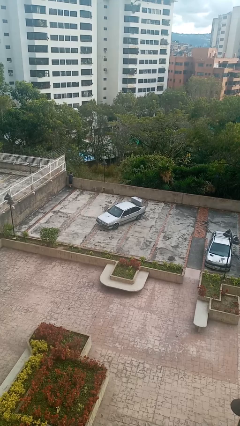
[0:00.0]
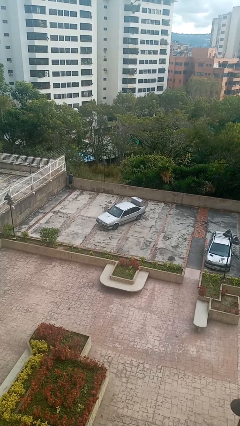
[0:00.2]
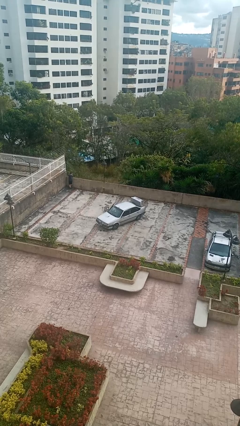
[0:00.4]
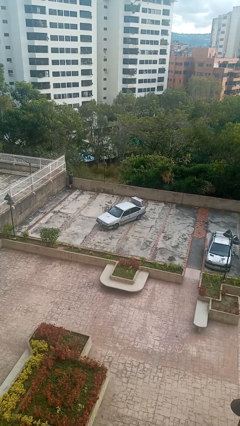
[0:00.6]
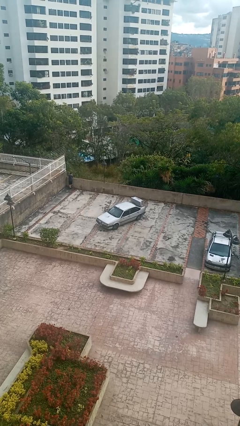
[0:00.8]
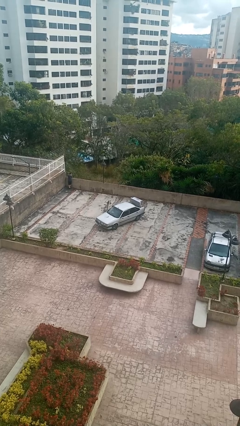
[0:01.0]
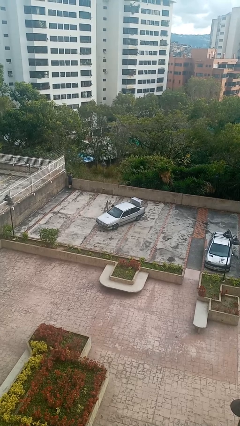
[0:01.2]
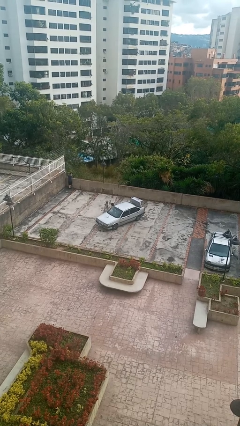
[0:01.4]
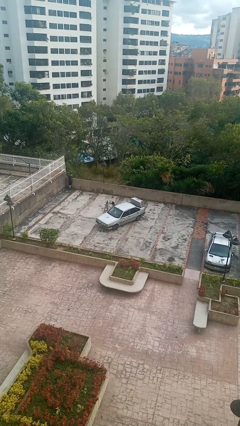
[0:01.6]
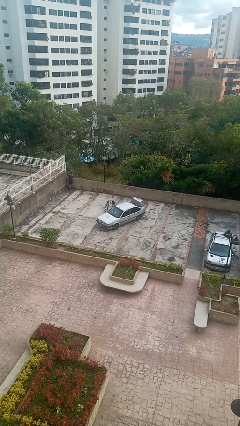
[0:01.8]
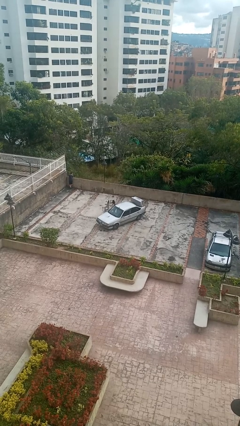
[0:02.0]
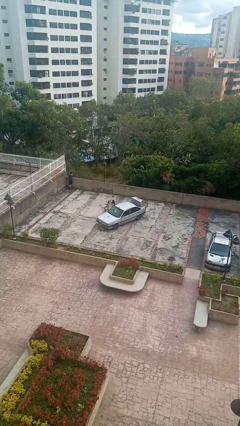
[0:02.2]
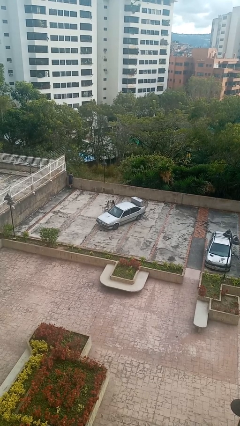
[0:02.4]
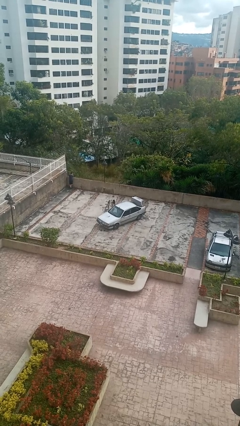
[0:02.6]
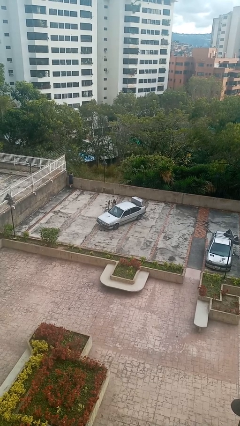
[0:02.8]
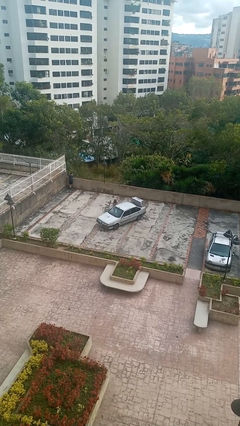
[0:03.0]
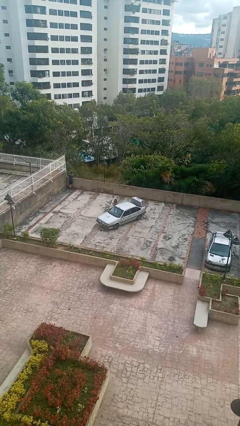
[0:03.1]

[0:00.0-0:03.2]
car drops off person

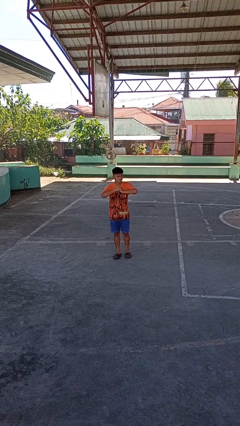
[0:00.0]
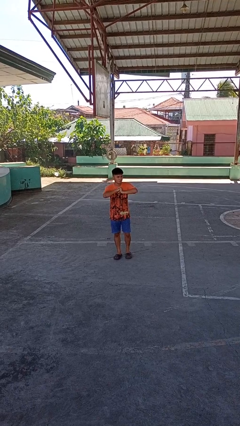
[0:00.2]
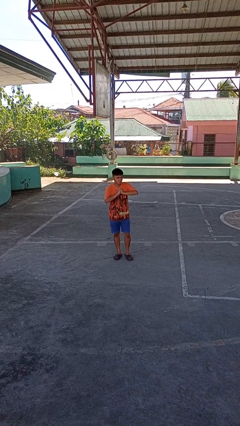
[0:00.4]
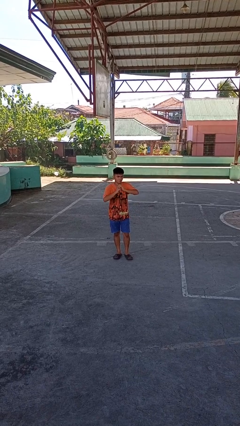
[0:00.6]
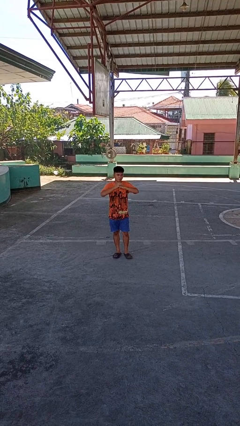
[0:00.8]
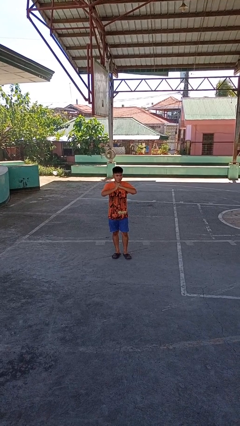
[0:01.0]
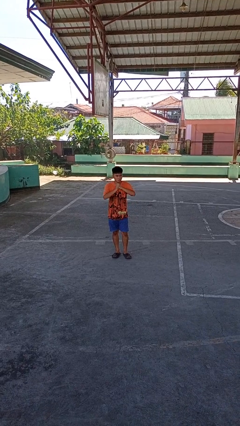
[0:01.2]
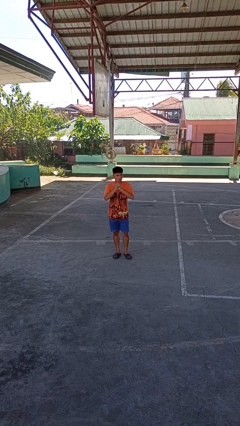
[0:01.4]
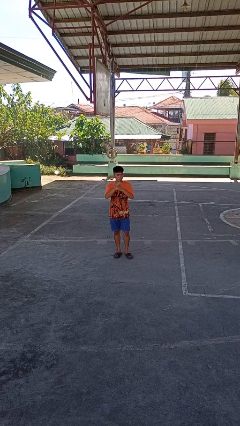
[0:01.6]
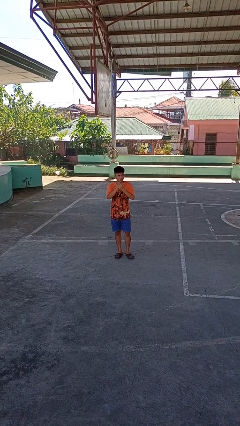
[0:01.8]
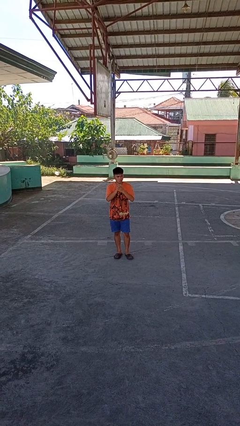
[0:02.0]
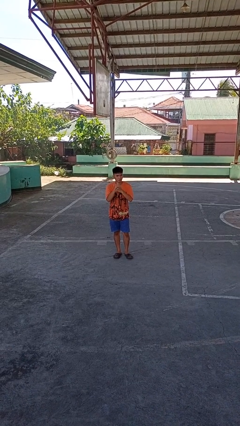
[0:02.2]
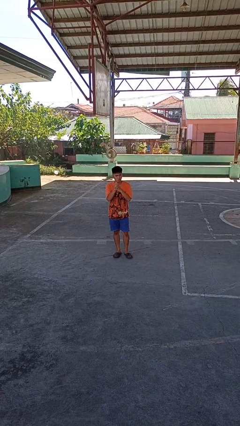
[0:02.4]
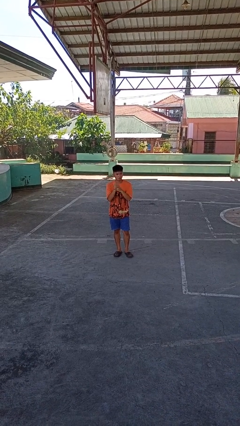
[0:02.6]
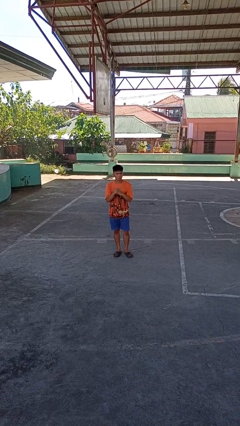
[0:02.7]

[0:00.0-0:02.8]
person cracks knuckles

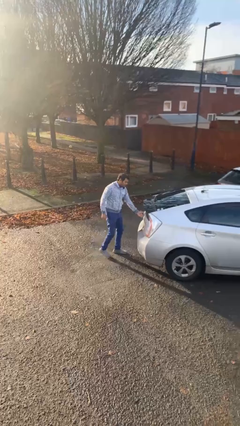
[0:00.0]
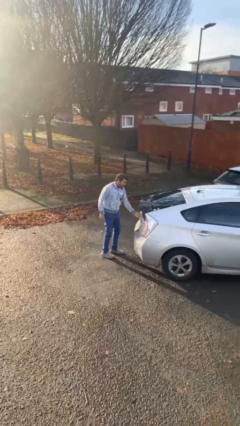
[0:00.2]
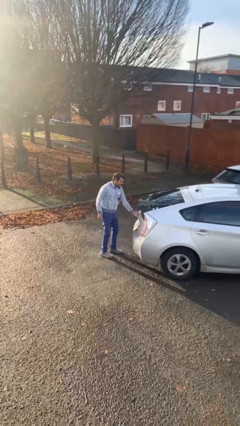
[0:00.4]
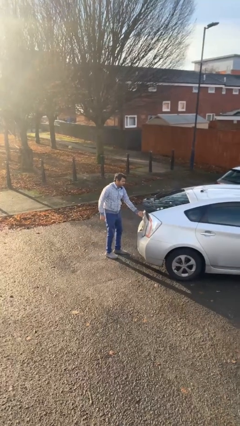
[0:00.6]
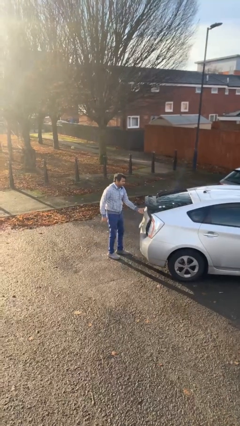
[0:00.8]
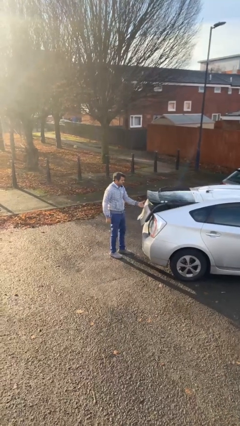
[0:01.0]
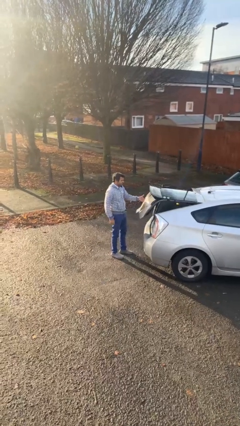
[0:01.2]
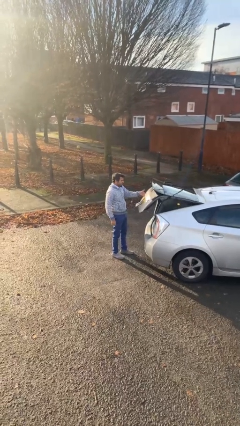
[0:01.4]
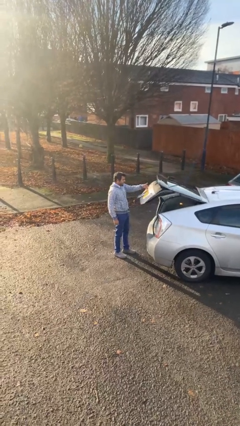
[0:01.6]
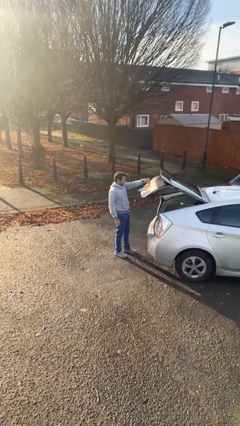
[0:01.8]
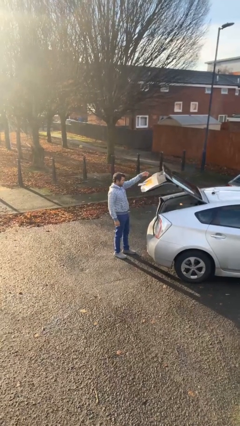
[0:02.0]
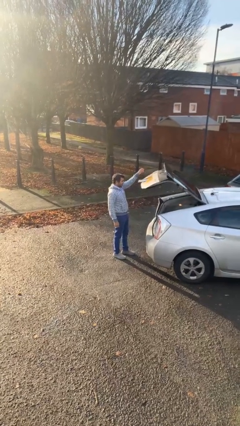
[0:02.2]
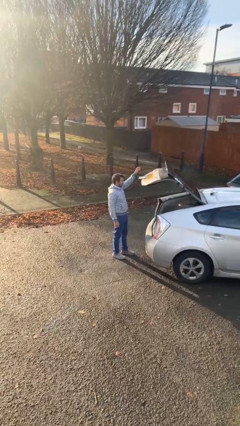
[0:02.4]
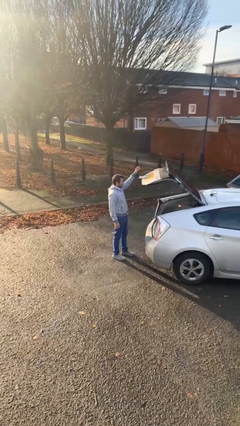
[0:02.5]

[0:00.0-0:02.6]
person opens car trunk

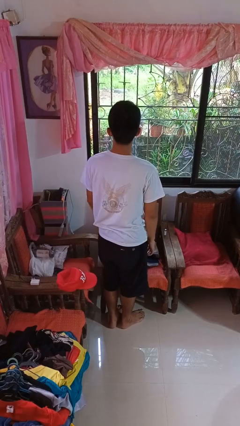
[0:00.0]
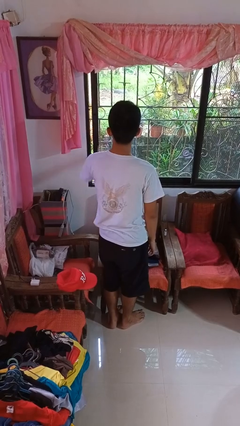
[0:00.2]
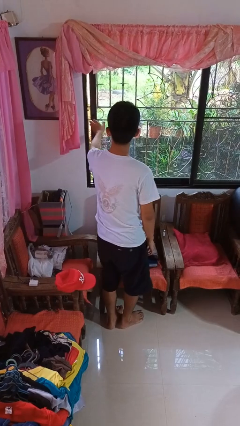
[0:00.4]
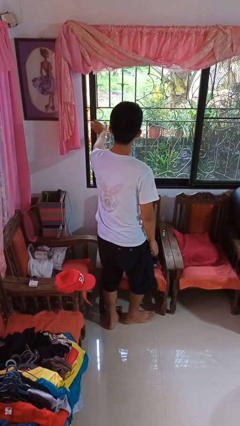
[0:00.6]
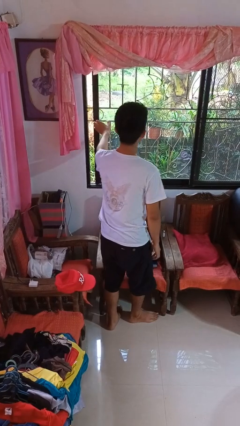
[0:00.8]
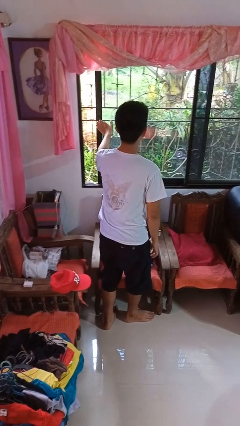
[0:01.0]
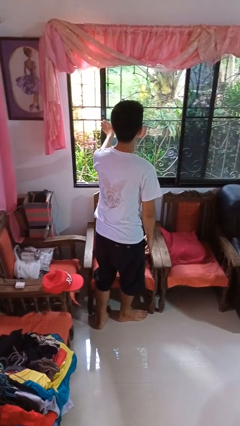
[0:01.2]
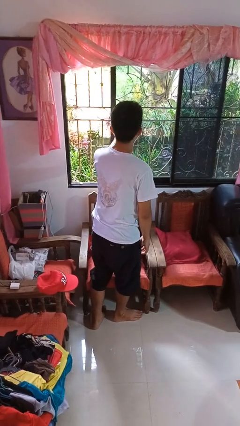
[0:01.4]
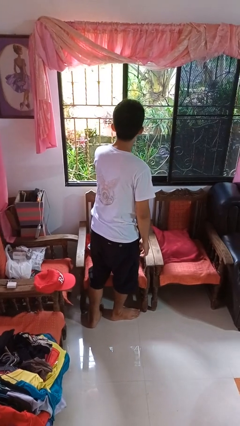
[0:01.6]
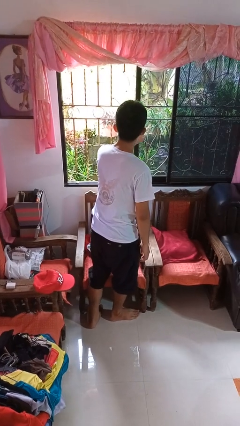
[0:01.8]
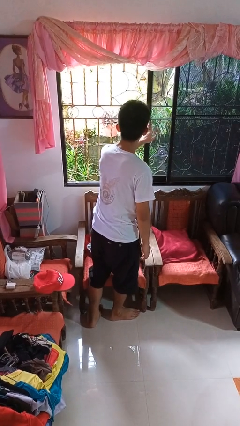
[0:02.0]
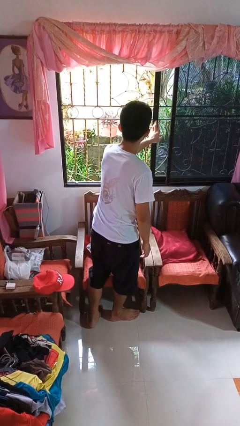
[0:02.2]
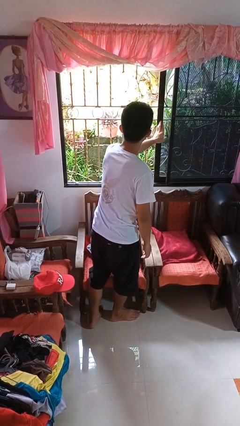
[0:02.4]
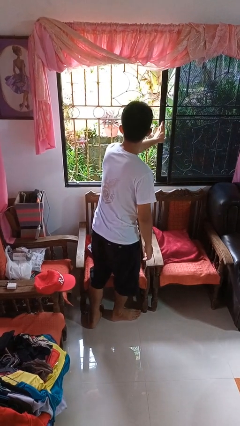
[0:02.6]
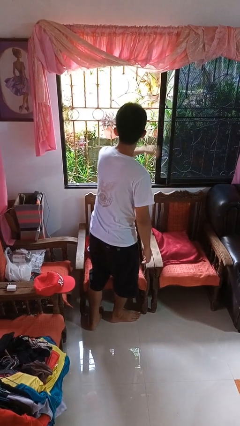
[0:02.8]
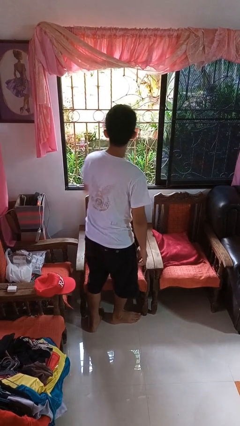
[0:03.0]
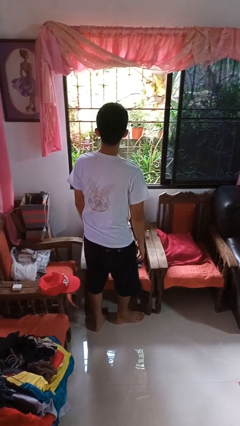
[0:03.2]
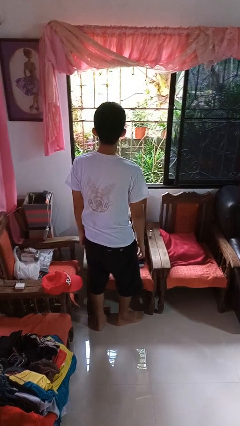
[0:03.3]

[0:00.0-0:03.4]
person opens home window

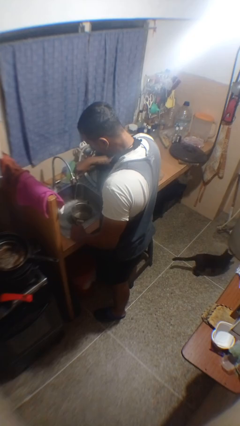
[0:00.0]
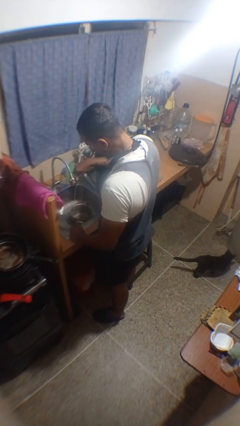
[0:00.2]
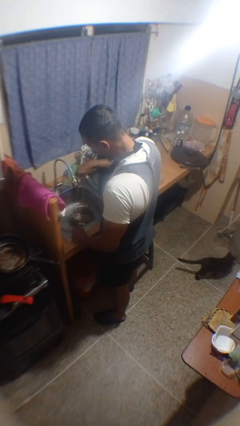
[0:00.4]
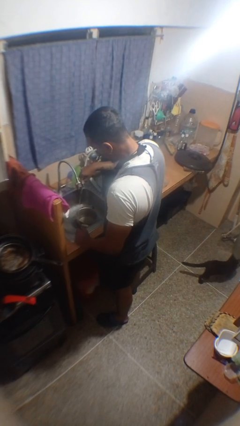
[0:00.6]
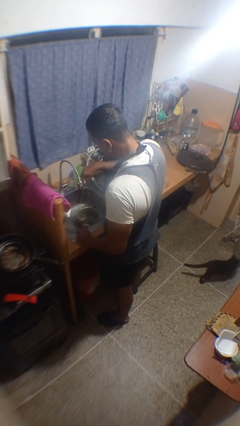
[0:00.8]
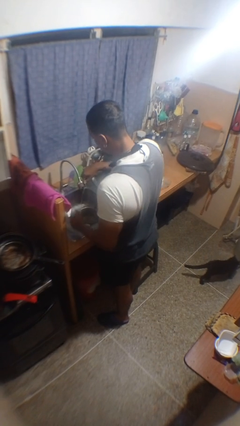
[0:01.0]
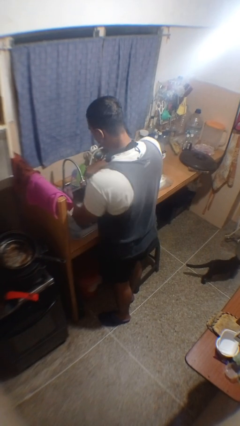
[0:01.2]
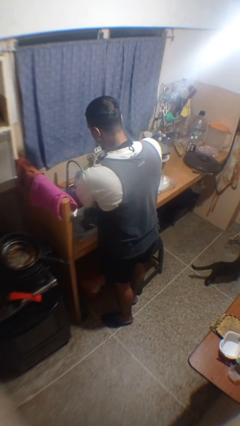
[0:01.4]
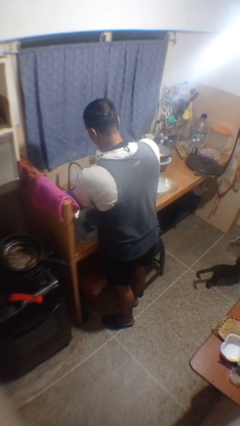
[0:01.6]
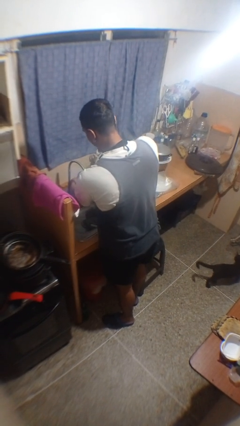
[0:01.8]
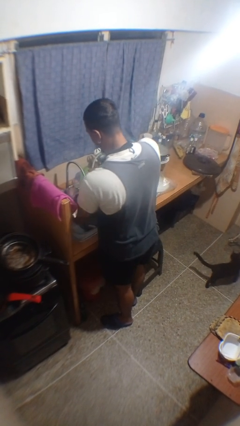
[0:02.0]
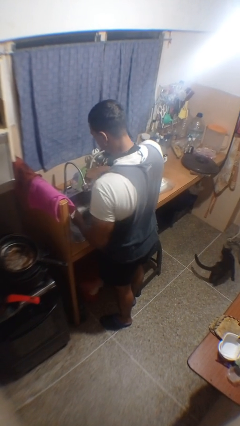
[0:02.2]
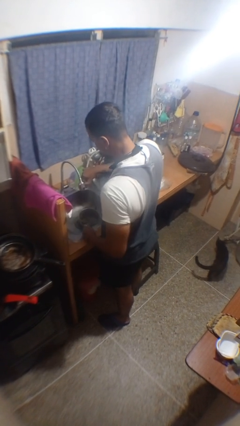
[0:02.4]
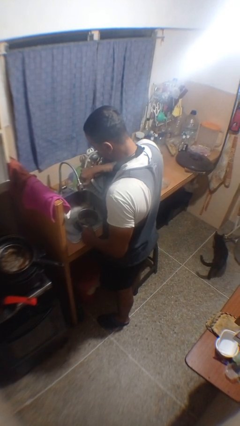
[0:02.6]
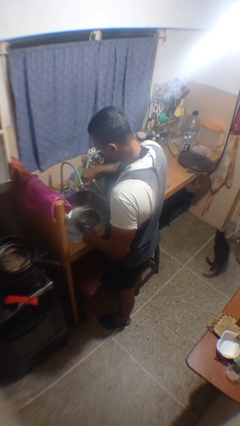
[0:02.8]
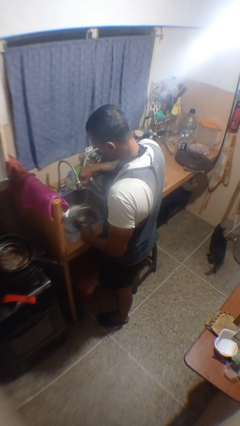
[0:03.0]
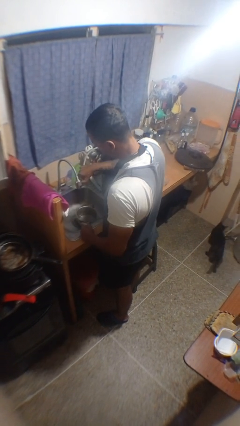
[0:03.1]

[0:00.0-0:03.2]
person turns off faucet

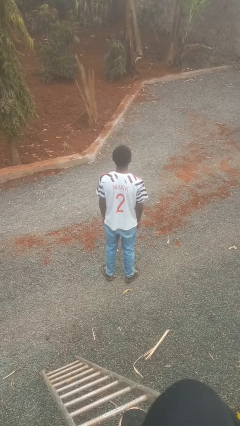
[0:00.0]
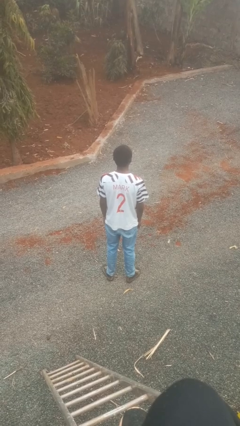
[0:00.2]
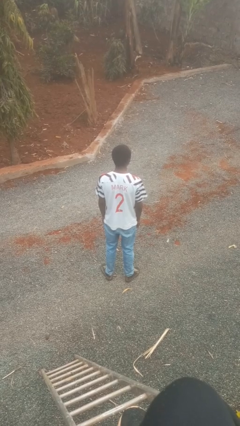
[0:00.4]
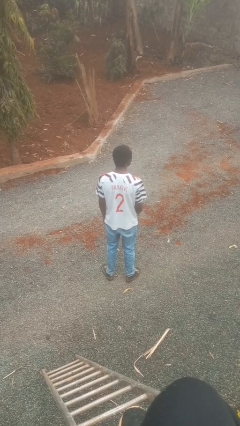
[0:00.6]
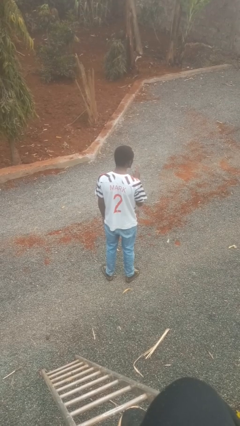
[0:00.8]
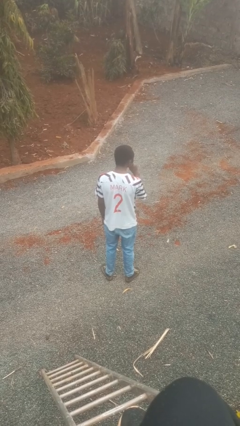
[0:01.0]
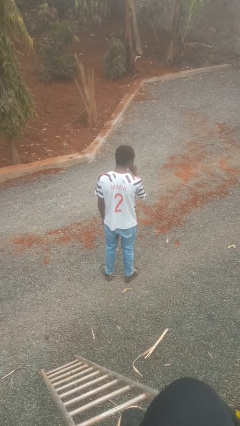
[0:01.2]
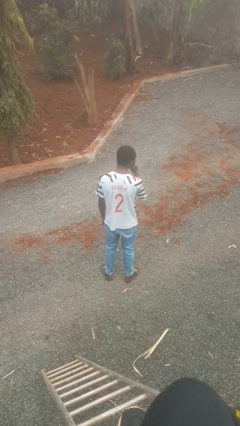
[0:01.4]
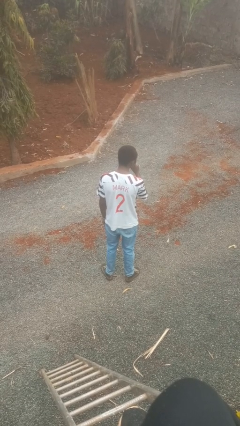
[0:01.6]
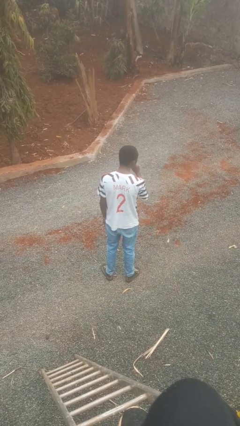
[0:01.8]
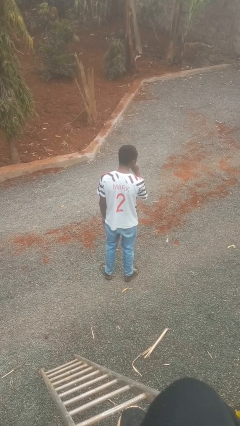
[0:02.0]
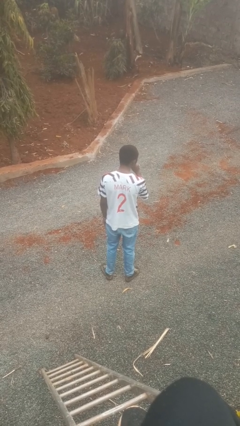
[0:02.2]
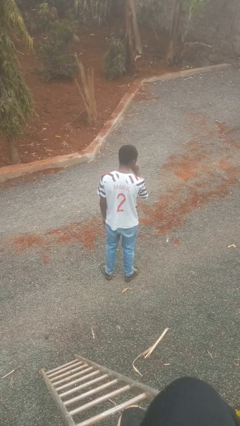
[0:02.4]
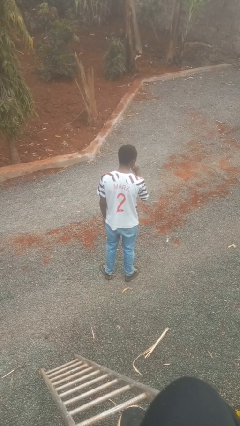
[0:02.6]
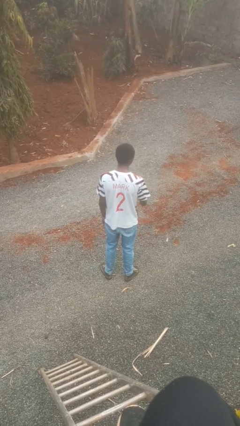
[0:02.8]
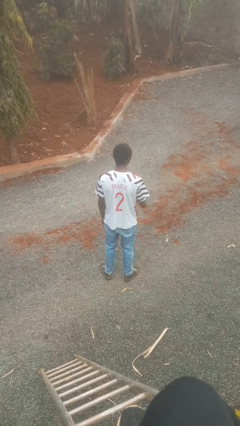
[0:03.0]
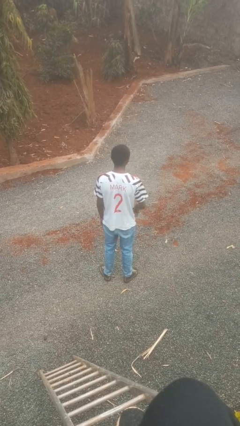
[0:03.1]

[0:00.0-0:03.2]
person gestures be quiet
